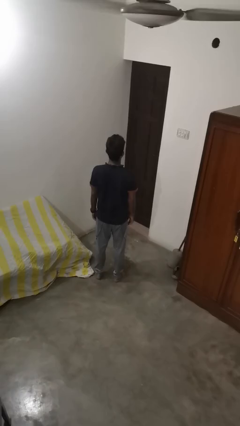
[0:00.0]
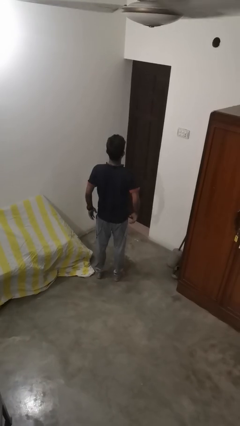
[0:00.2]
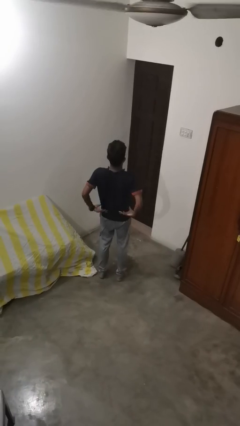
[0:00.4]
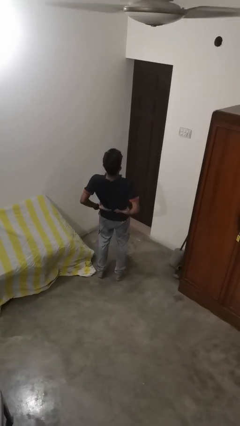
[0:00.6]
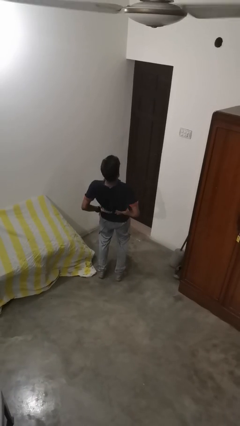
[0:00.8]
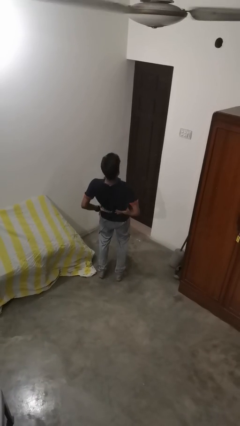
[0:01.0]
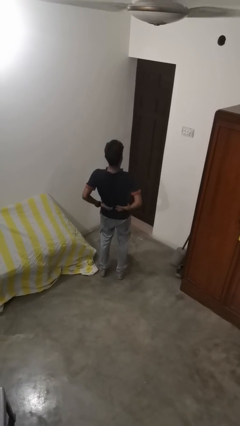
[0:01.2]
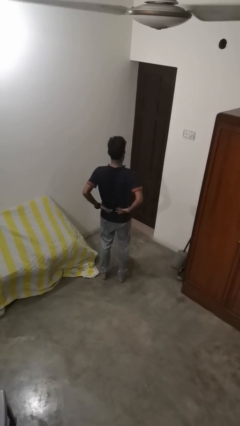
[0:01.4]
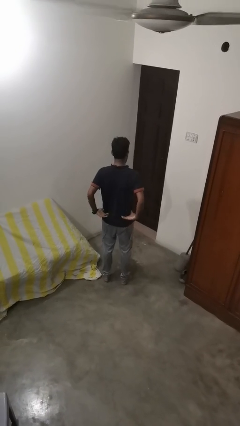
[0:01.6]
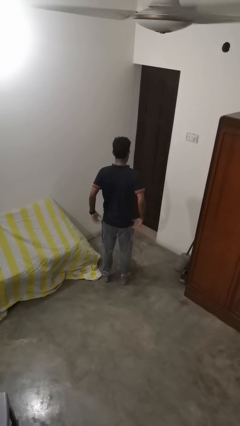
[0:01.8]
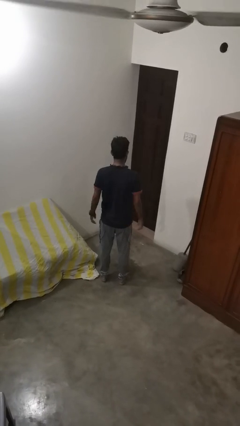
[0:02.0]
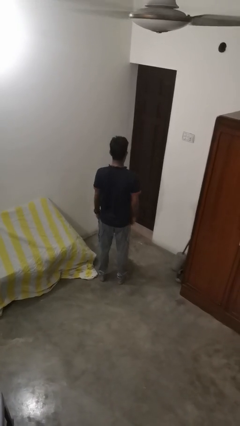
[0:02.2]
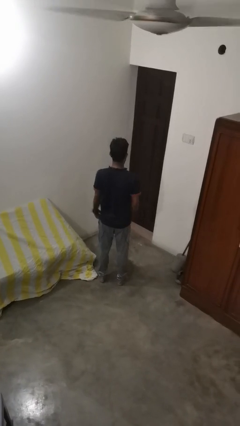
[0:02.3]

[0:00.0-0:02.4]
person stretches back

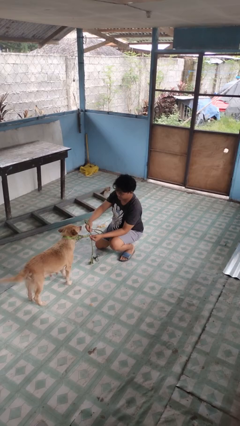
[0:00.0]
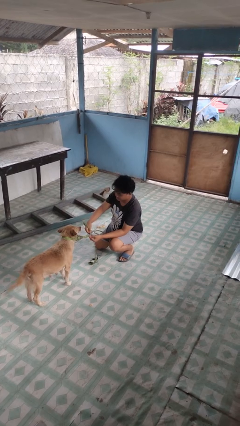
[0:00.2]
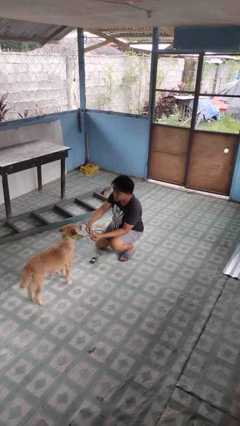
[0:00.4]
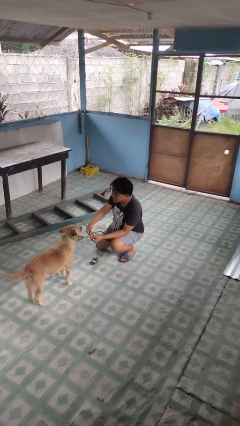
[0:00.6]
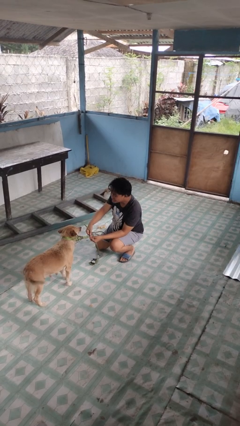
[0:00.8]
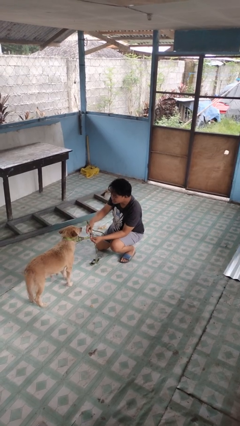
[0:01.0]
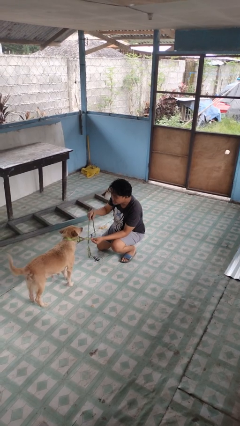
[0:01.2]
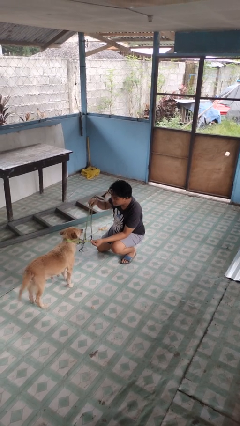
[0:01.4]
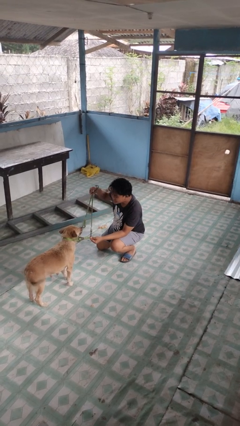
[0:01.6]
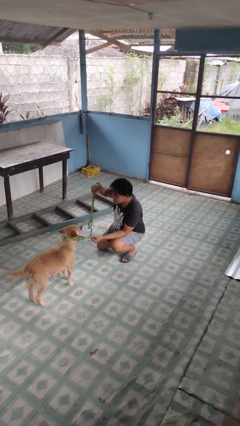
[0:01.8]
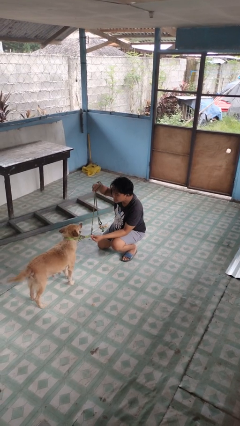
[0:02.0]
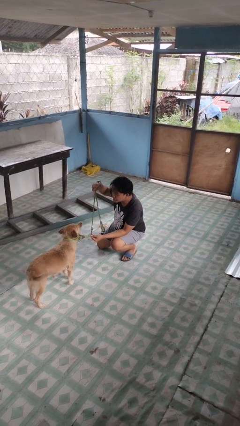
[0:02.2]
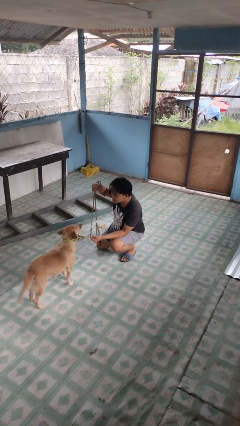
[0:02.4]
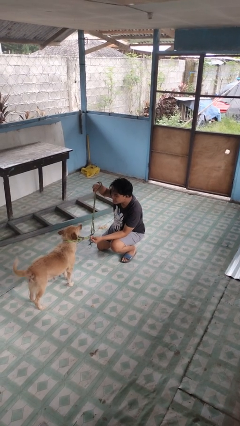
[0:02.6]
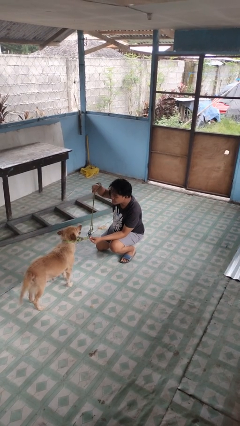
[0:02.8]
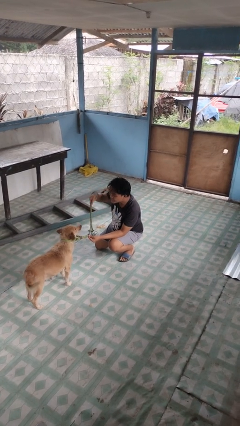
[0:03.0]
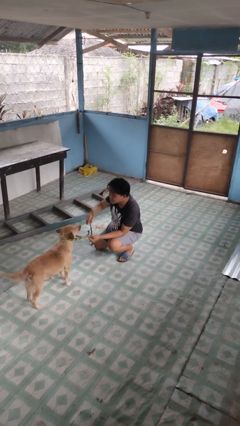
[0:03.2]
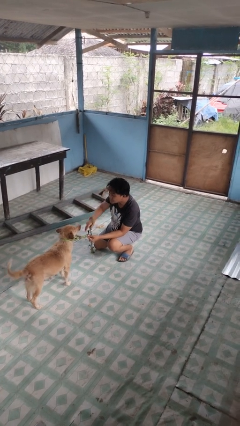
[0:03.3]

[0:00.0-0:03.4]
person attaches leash to dog

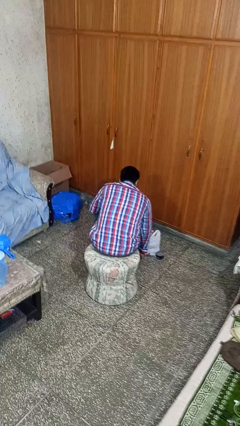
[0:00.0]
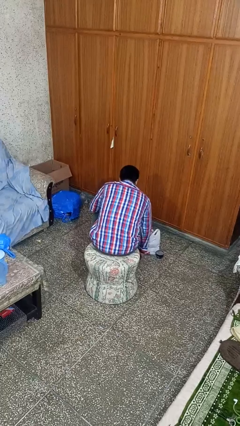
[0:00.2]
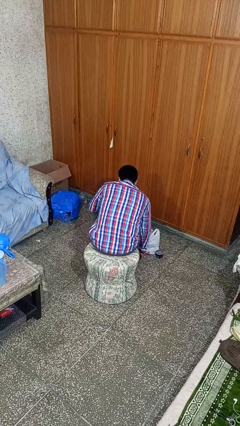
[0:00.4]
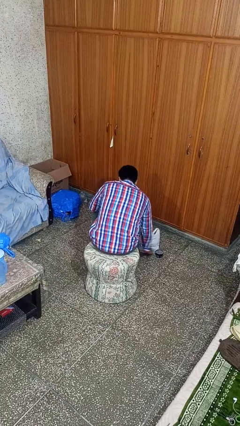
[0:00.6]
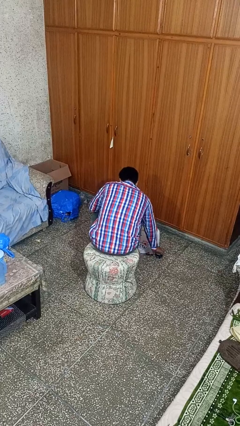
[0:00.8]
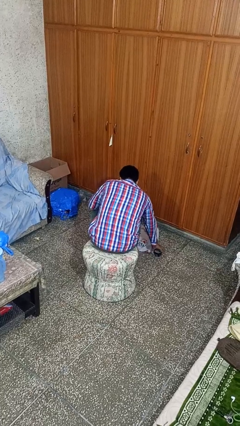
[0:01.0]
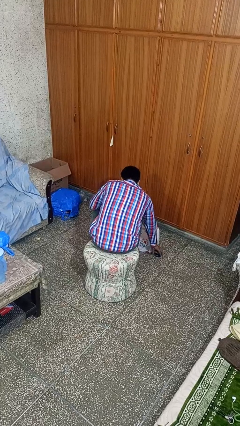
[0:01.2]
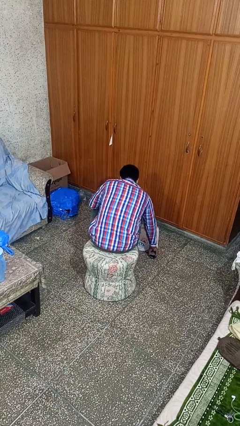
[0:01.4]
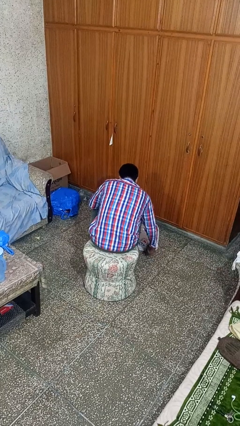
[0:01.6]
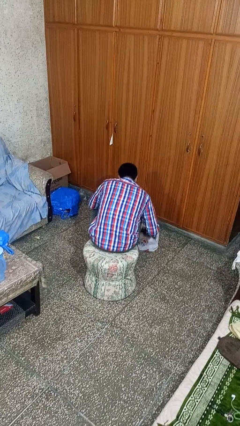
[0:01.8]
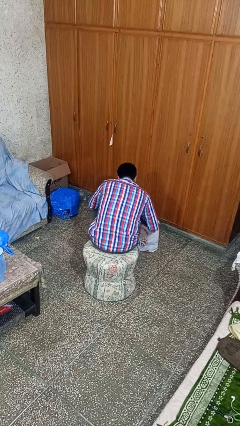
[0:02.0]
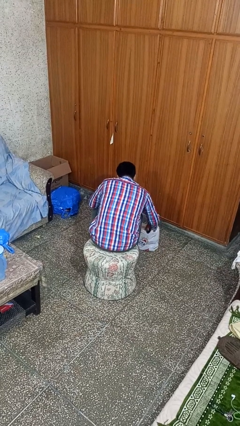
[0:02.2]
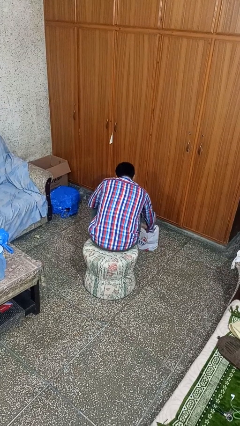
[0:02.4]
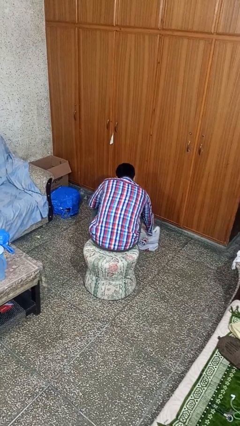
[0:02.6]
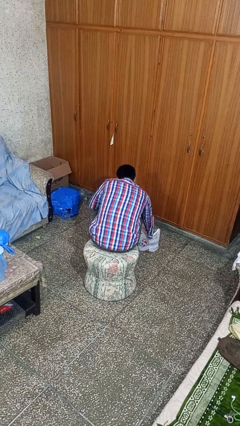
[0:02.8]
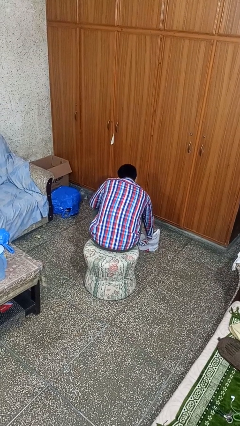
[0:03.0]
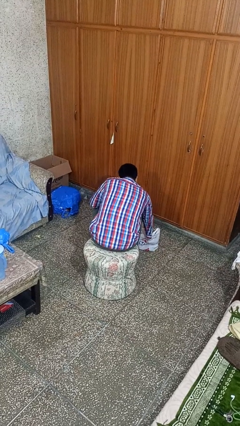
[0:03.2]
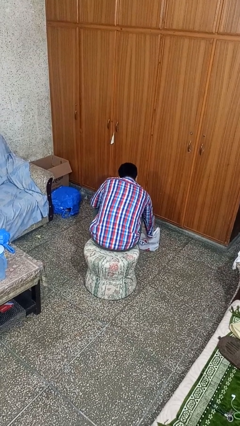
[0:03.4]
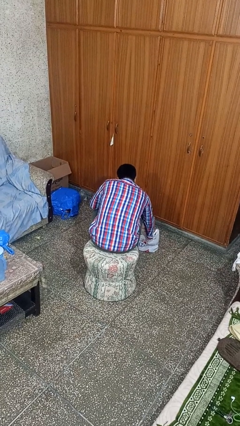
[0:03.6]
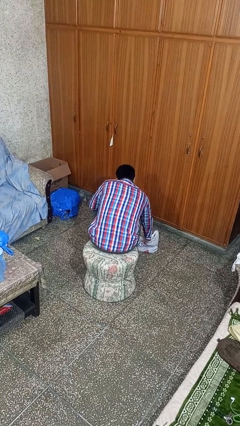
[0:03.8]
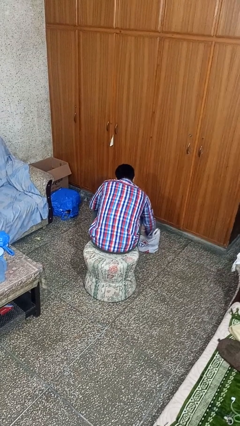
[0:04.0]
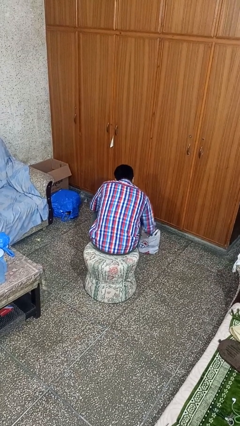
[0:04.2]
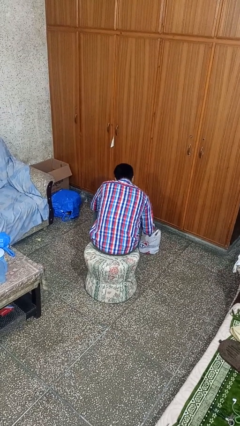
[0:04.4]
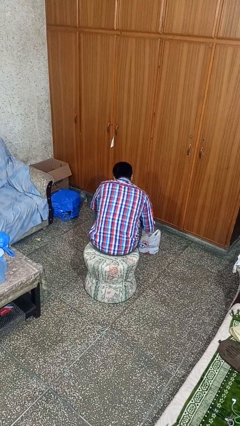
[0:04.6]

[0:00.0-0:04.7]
person puts object into bag

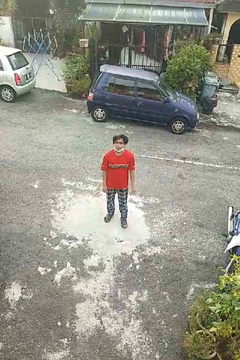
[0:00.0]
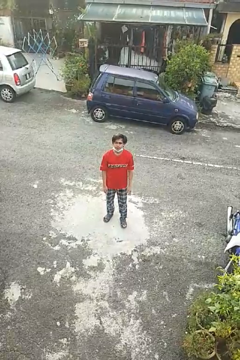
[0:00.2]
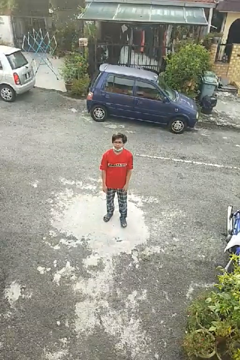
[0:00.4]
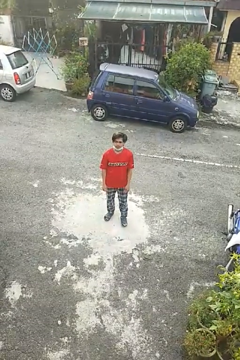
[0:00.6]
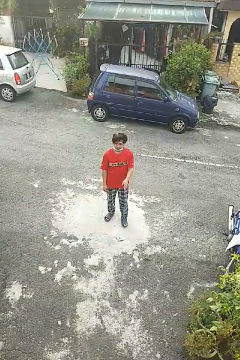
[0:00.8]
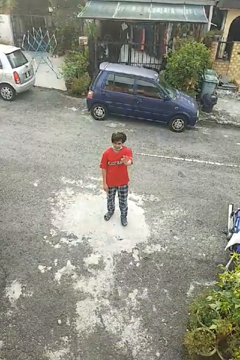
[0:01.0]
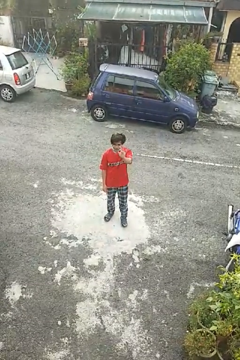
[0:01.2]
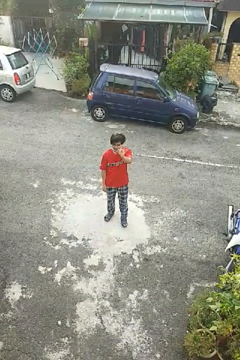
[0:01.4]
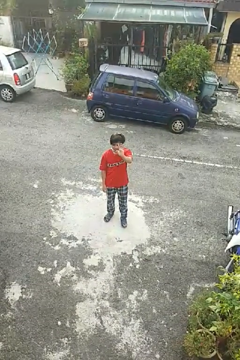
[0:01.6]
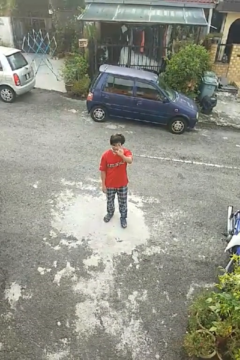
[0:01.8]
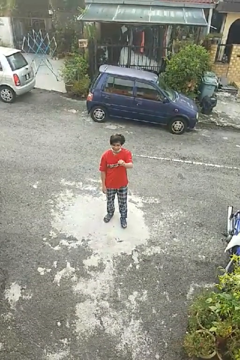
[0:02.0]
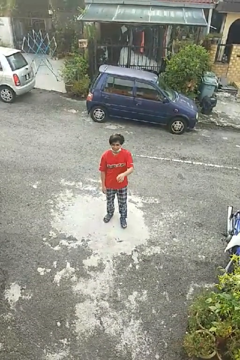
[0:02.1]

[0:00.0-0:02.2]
person waves at person

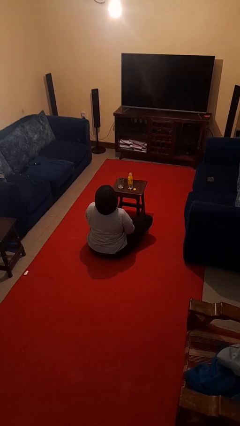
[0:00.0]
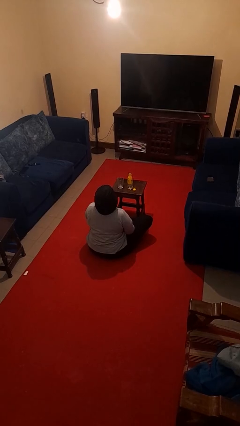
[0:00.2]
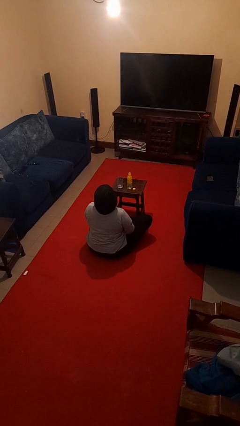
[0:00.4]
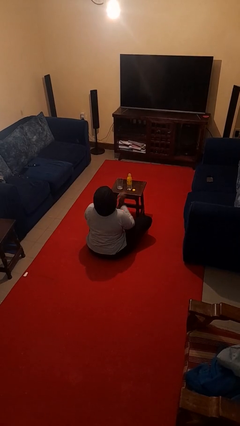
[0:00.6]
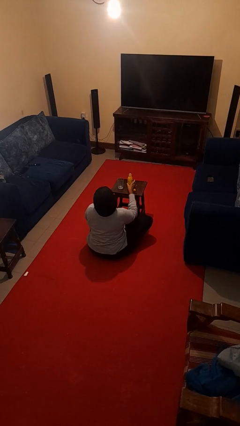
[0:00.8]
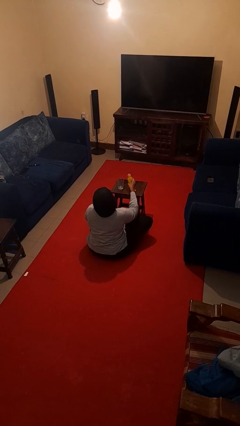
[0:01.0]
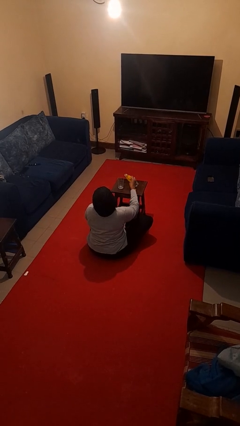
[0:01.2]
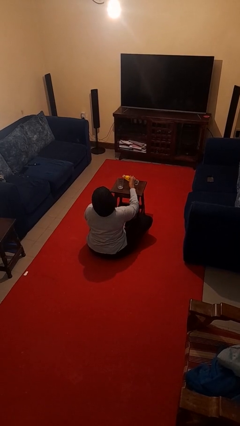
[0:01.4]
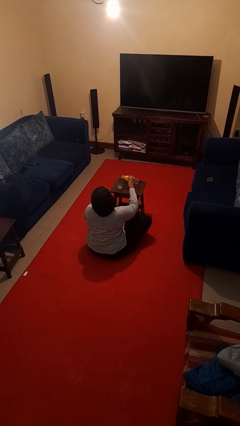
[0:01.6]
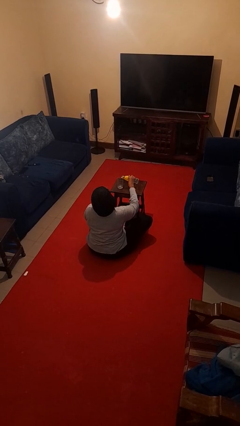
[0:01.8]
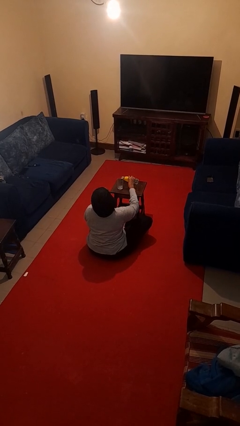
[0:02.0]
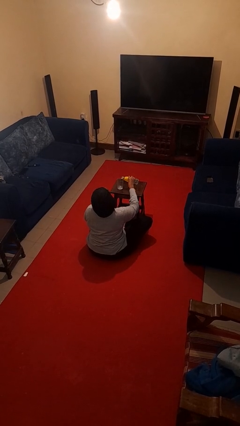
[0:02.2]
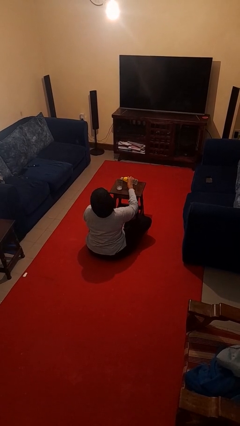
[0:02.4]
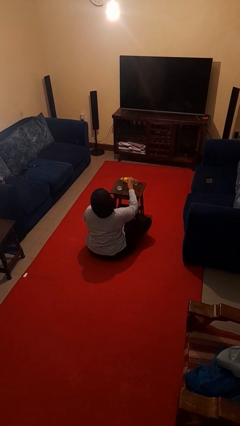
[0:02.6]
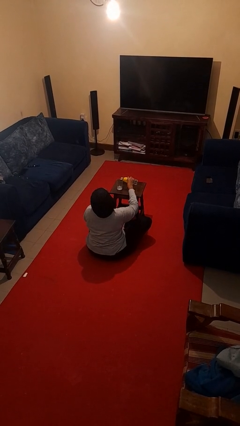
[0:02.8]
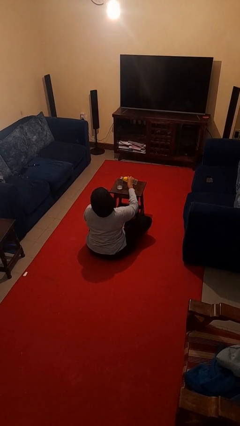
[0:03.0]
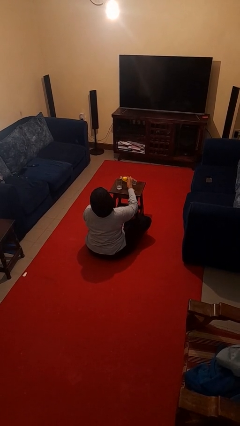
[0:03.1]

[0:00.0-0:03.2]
person pours liquid into cup

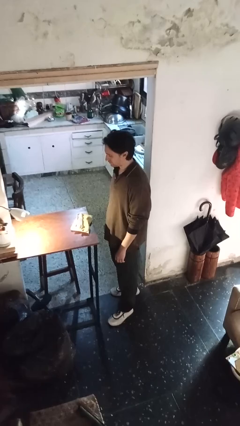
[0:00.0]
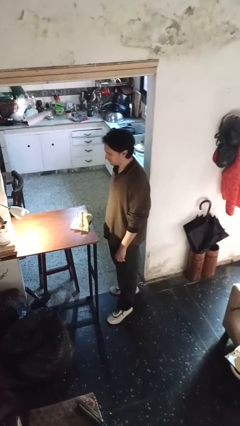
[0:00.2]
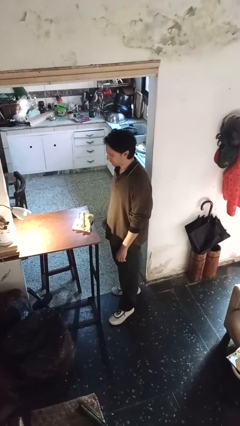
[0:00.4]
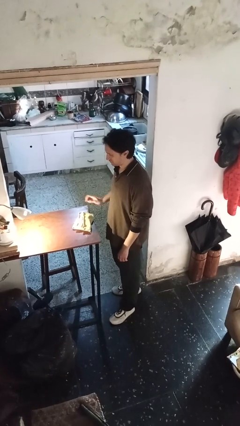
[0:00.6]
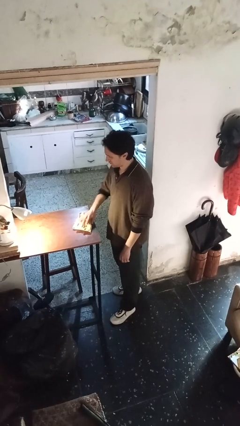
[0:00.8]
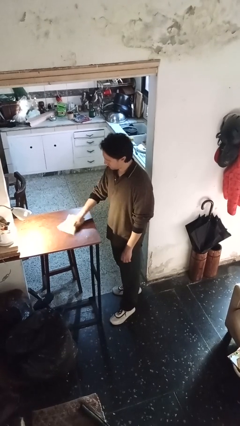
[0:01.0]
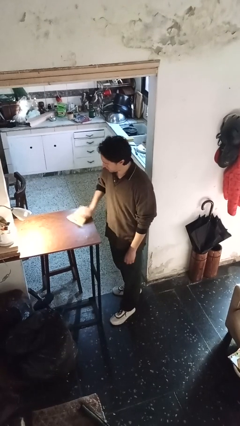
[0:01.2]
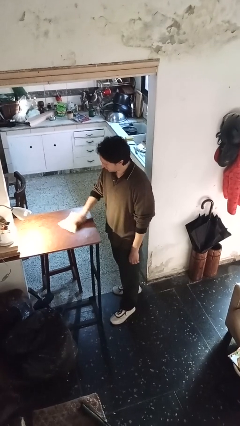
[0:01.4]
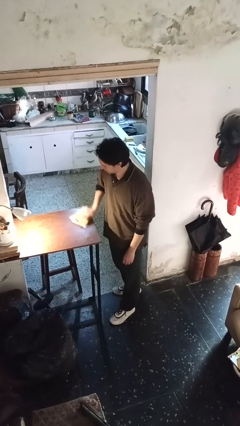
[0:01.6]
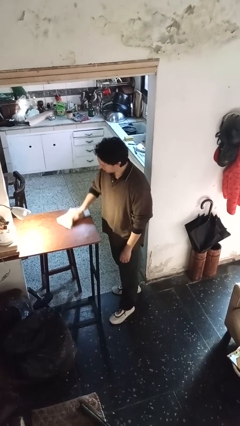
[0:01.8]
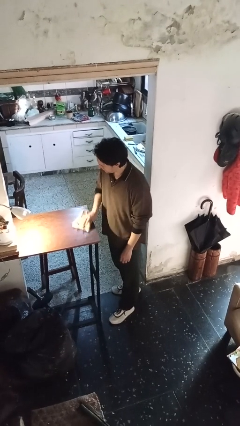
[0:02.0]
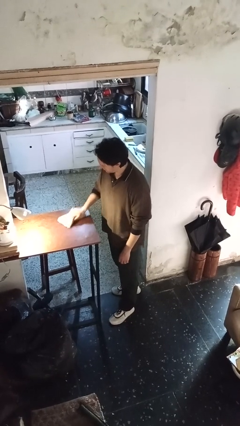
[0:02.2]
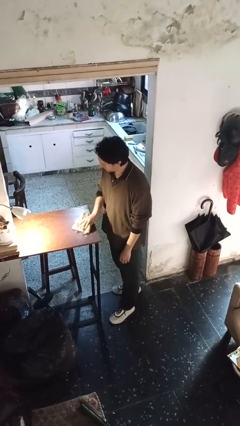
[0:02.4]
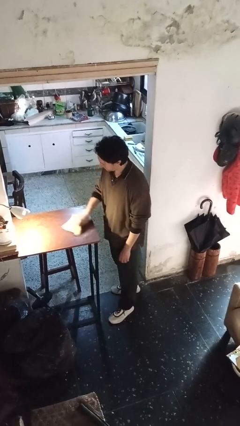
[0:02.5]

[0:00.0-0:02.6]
person cleans table with rag
